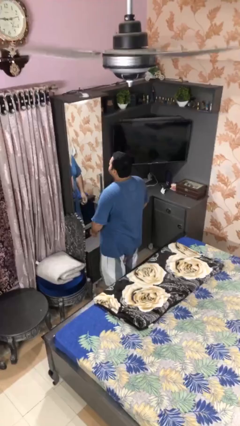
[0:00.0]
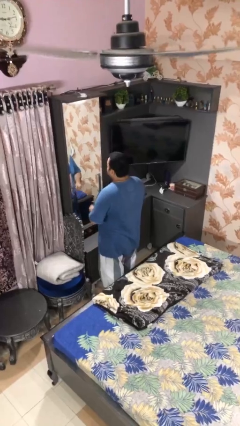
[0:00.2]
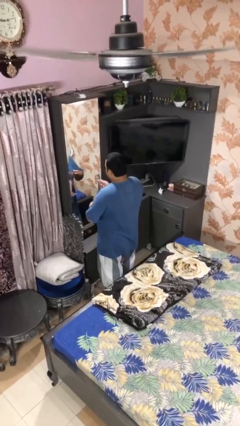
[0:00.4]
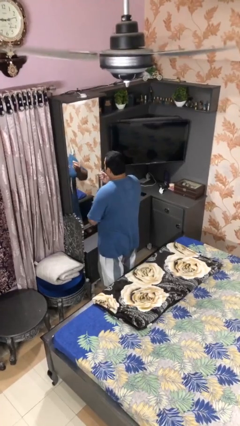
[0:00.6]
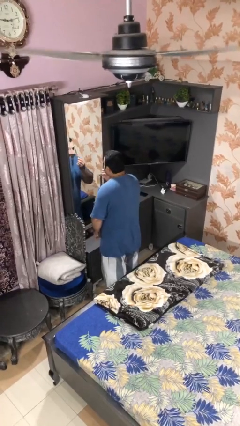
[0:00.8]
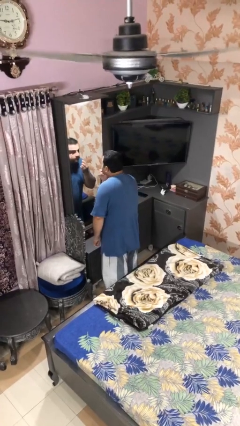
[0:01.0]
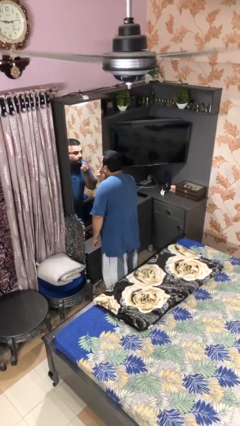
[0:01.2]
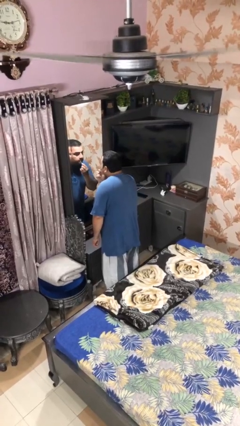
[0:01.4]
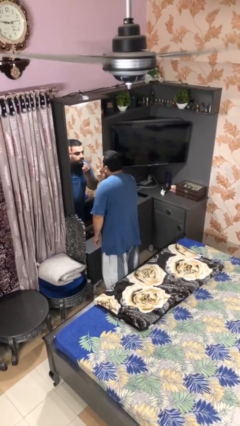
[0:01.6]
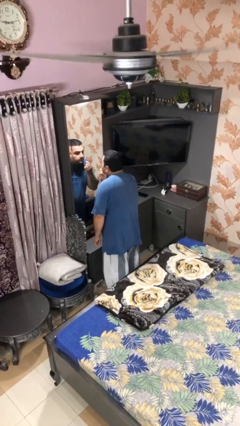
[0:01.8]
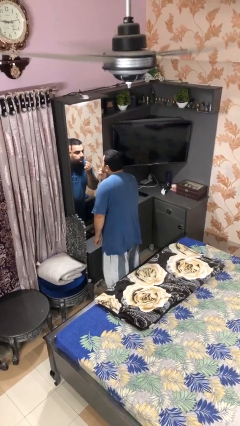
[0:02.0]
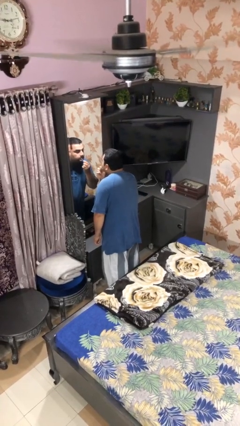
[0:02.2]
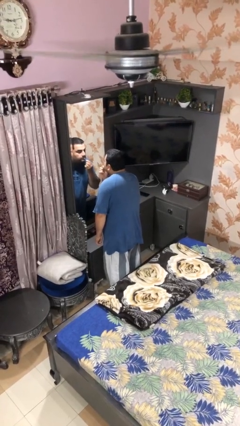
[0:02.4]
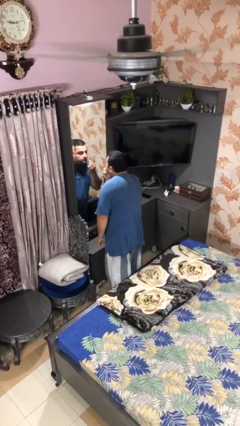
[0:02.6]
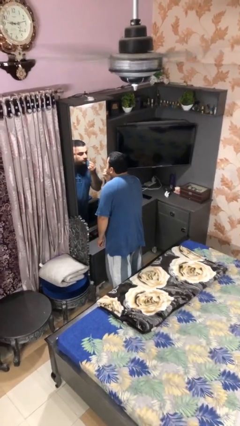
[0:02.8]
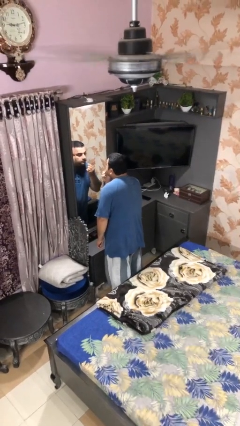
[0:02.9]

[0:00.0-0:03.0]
person applies lip makeup

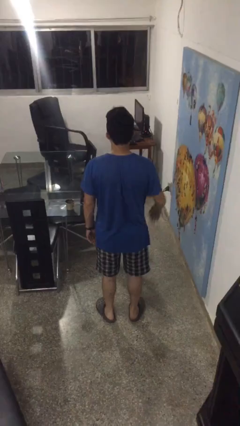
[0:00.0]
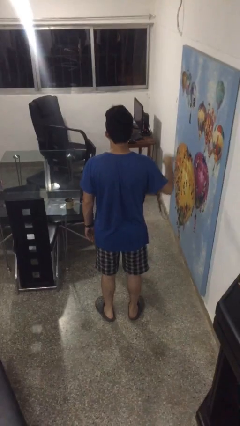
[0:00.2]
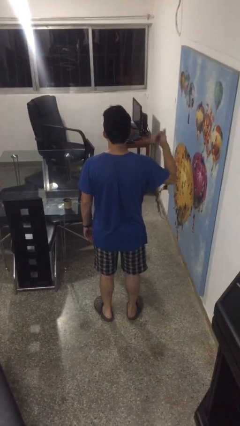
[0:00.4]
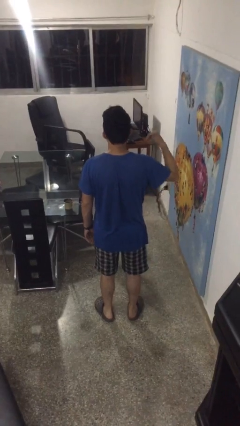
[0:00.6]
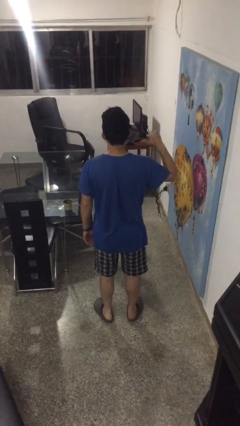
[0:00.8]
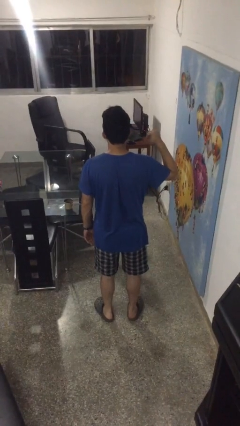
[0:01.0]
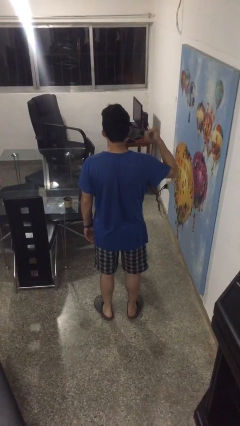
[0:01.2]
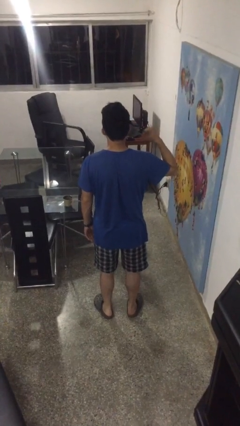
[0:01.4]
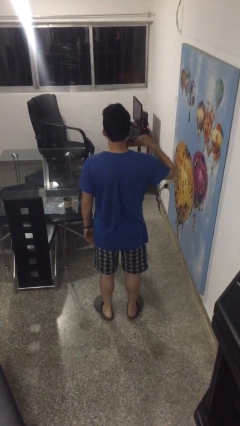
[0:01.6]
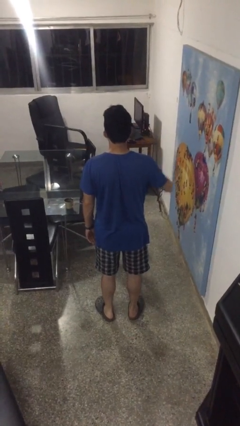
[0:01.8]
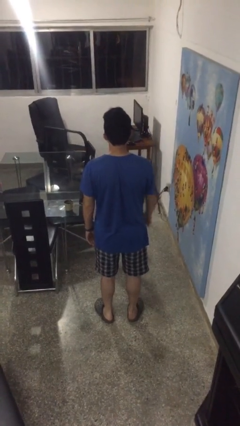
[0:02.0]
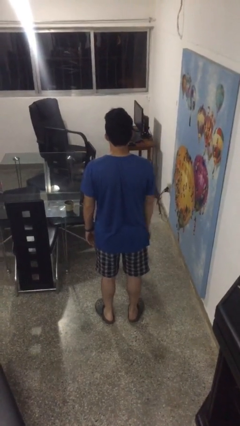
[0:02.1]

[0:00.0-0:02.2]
person gestures hang loose

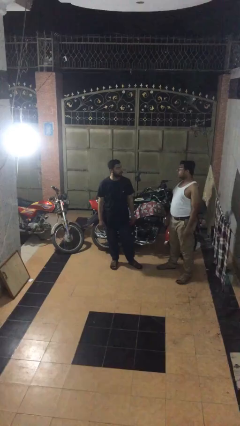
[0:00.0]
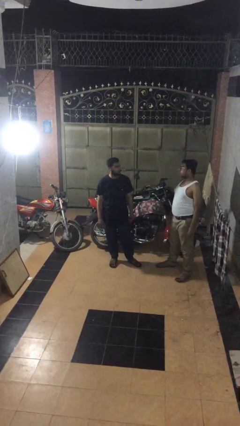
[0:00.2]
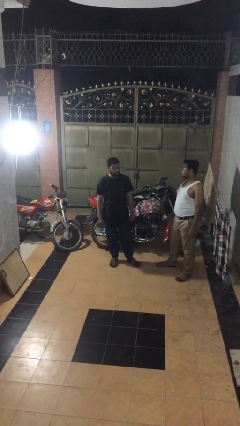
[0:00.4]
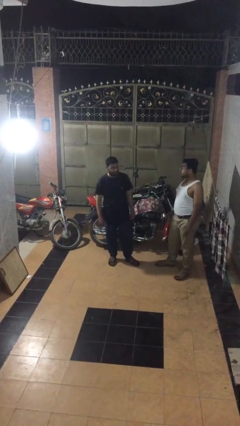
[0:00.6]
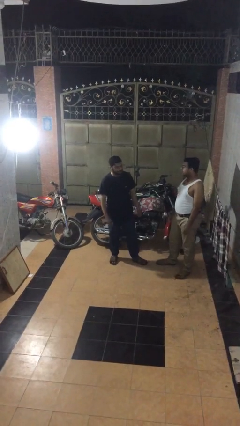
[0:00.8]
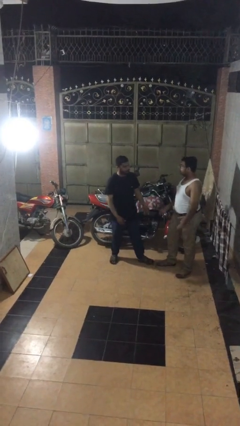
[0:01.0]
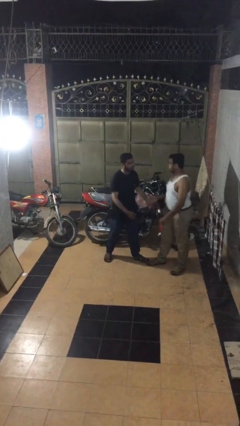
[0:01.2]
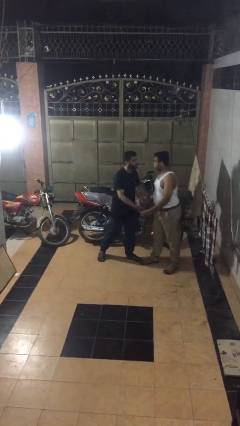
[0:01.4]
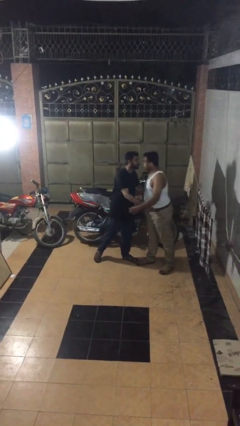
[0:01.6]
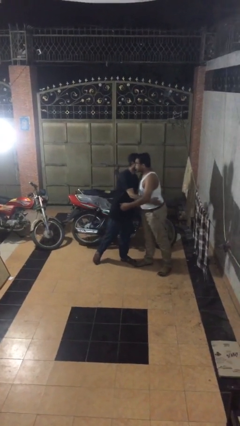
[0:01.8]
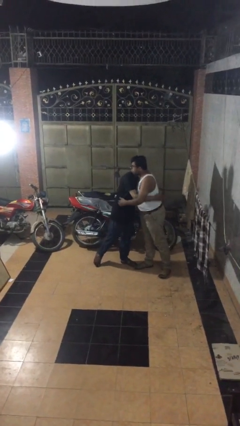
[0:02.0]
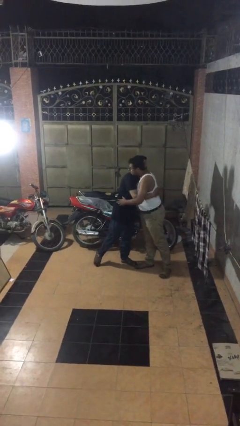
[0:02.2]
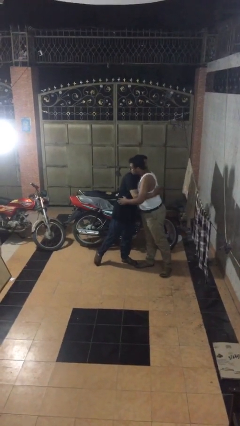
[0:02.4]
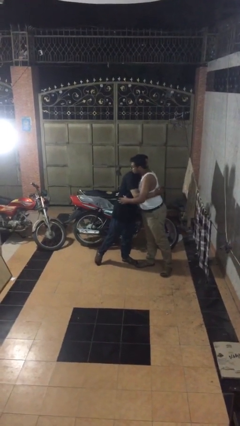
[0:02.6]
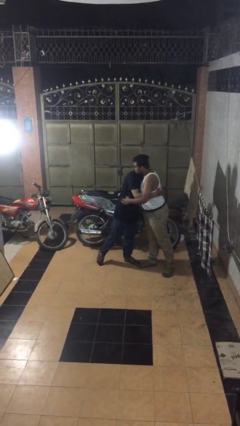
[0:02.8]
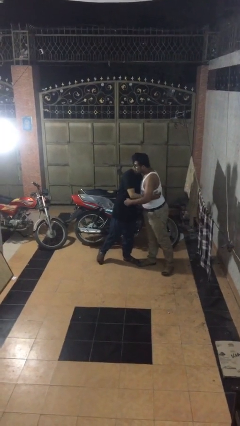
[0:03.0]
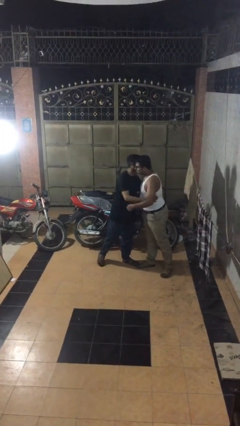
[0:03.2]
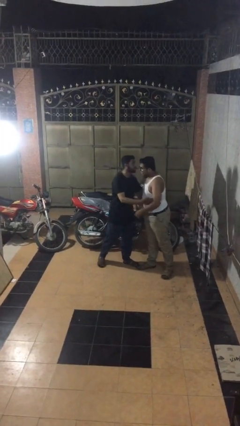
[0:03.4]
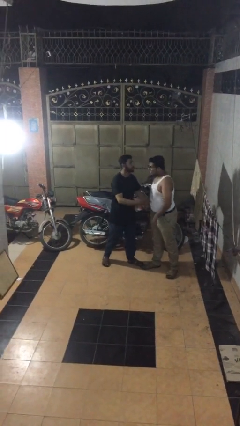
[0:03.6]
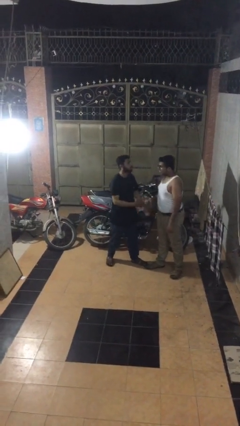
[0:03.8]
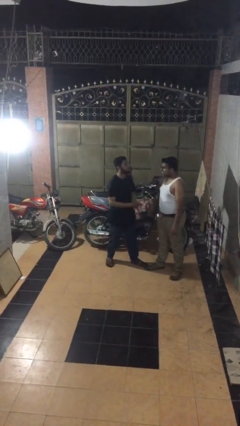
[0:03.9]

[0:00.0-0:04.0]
person embraces person

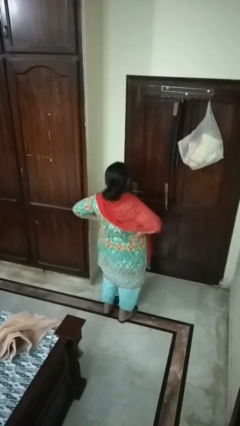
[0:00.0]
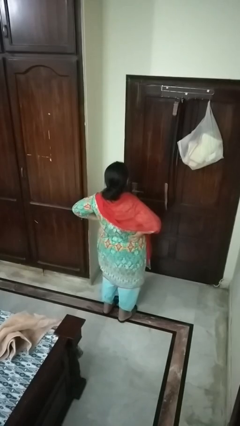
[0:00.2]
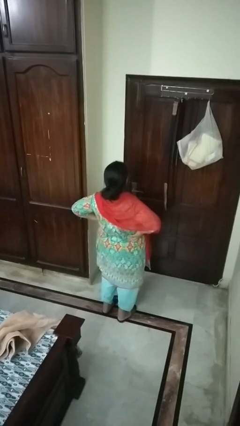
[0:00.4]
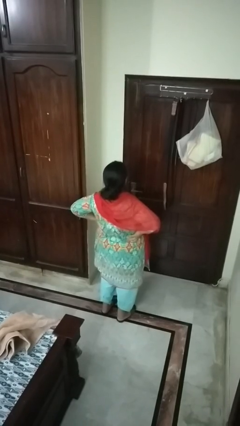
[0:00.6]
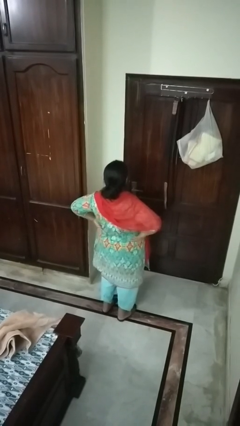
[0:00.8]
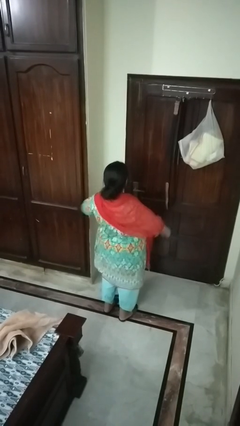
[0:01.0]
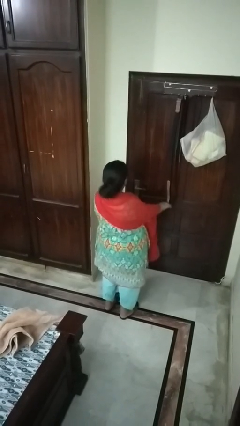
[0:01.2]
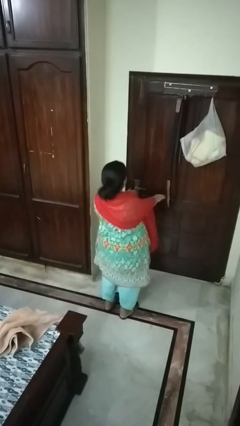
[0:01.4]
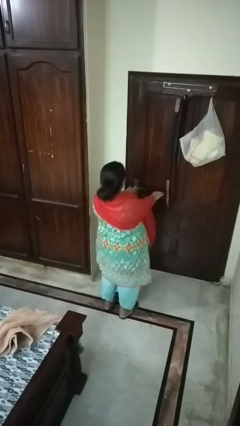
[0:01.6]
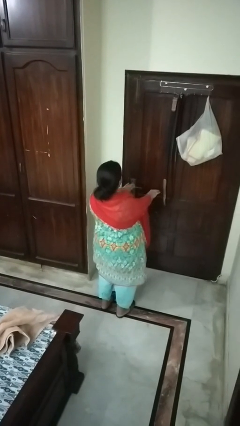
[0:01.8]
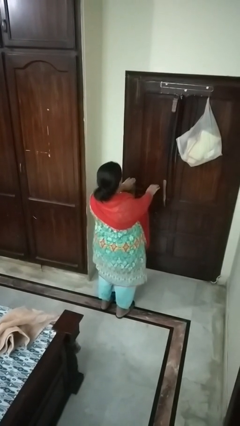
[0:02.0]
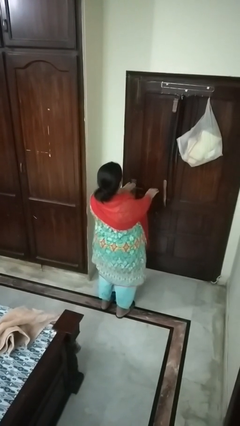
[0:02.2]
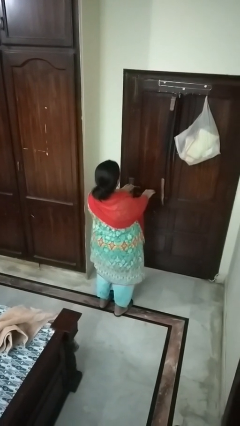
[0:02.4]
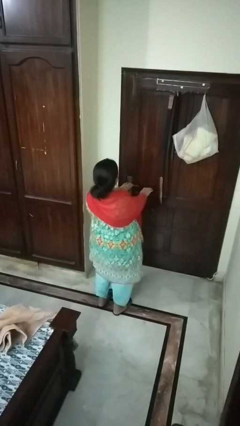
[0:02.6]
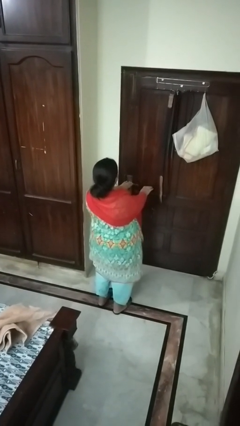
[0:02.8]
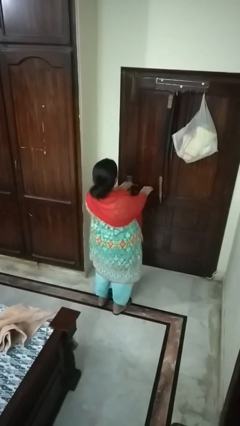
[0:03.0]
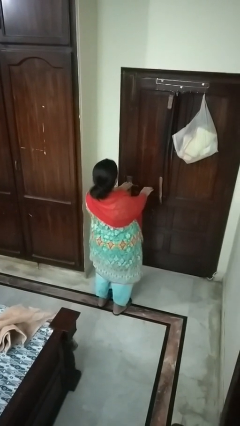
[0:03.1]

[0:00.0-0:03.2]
person stretches arms to side

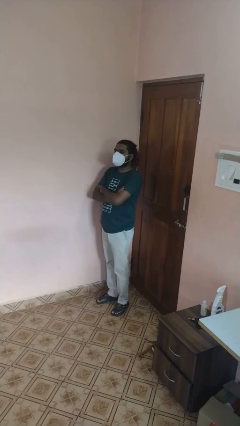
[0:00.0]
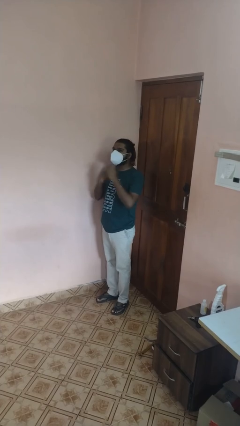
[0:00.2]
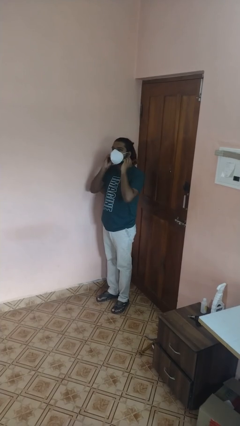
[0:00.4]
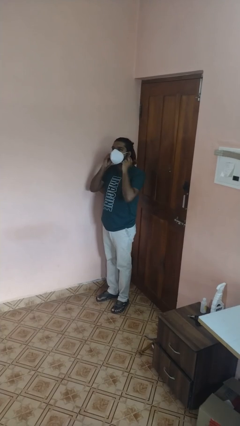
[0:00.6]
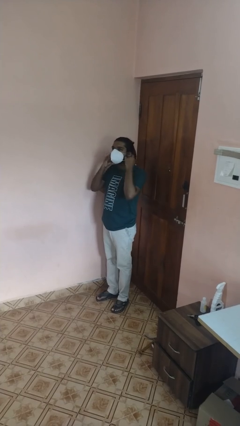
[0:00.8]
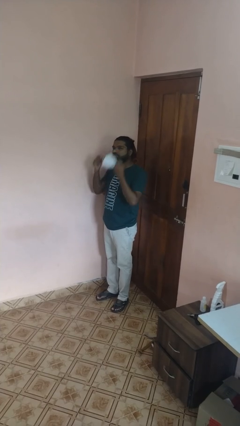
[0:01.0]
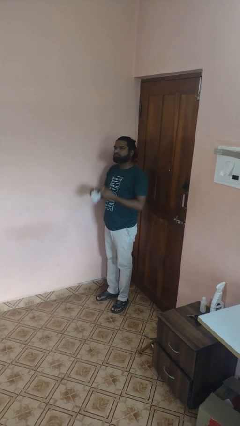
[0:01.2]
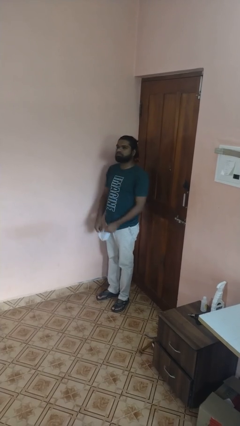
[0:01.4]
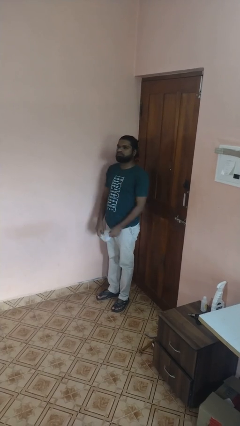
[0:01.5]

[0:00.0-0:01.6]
person takes off facemask

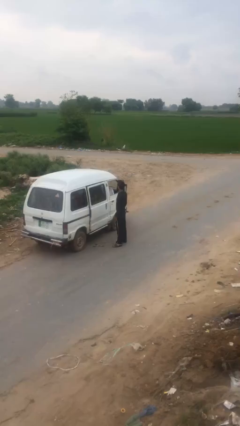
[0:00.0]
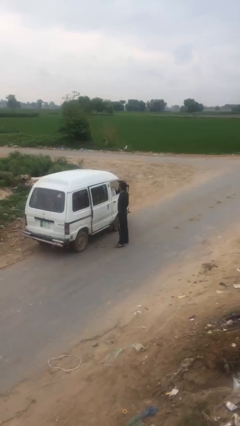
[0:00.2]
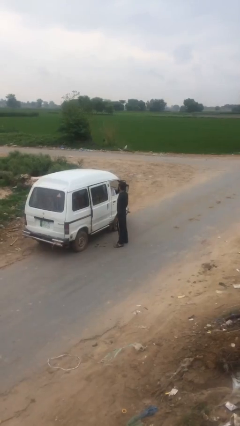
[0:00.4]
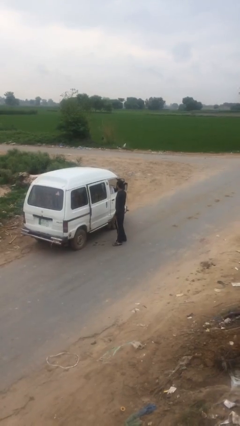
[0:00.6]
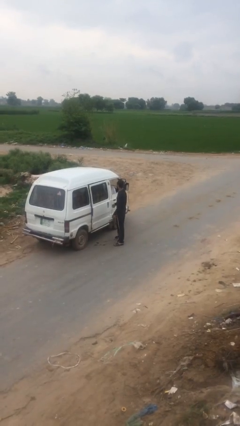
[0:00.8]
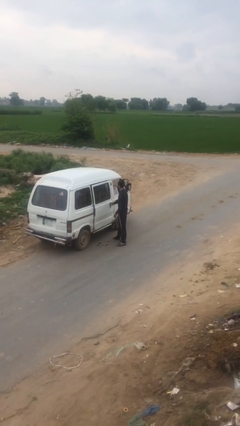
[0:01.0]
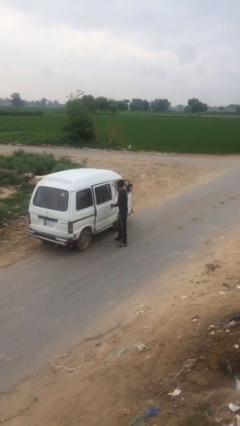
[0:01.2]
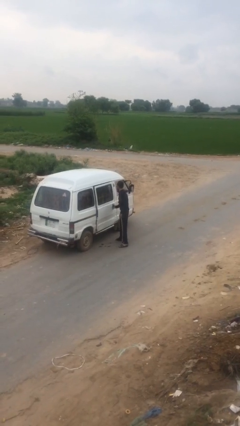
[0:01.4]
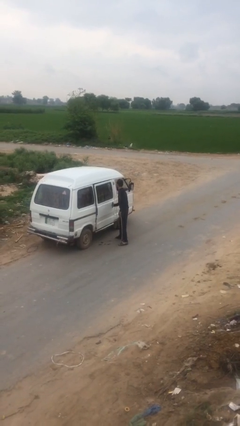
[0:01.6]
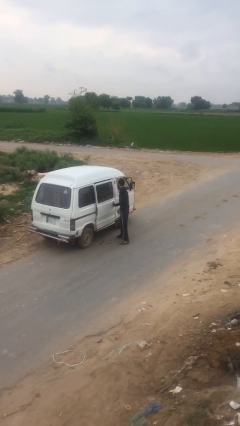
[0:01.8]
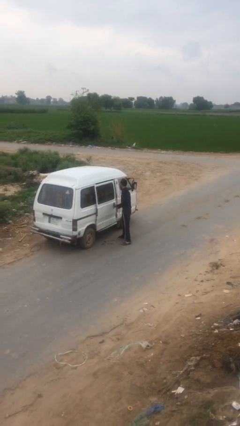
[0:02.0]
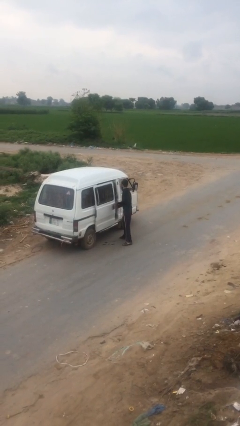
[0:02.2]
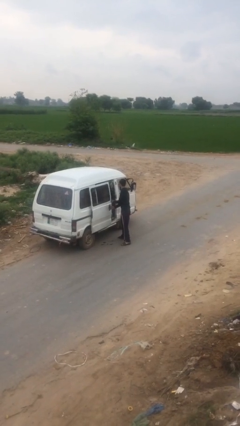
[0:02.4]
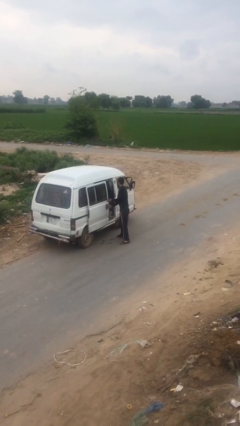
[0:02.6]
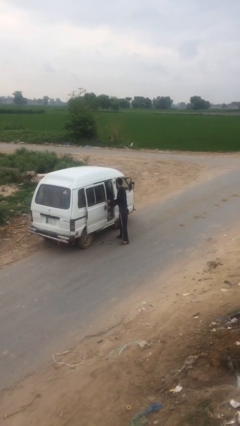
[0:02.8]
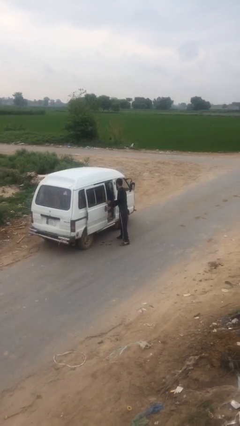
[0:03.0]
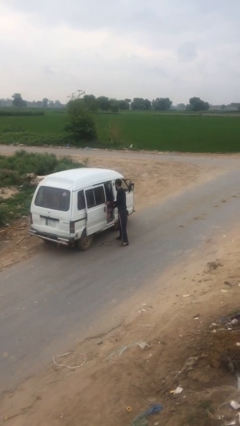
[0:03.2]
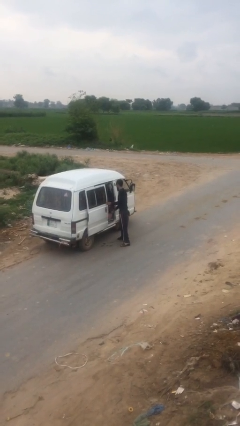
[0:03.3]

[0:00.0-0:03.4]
person opens car door

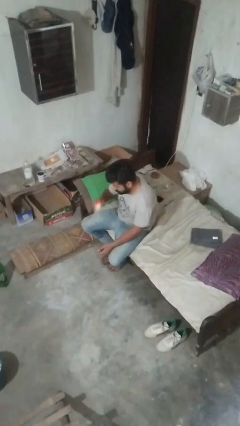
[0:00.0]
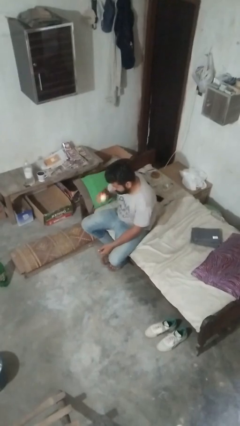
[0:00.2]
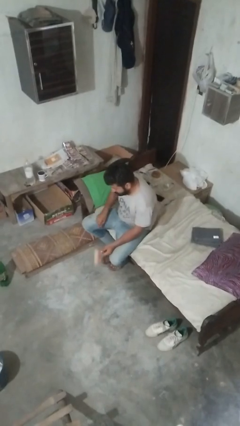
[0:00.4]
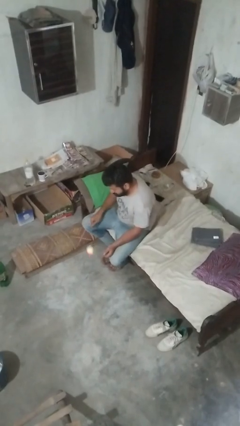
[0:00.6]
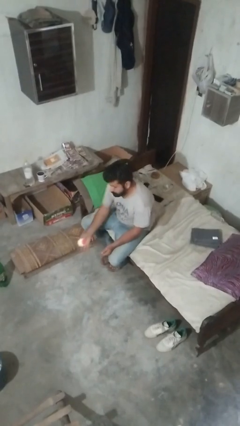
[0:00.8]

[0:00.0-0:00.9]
person bounces ball on floor
